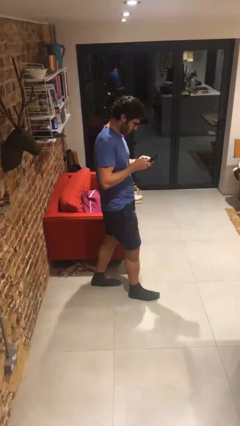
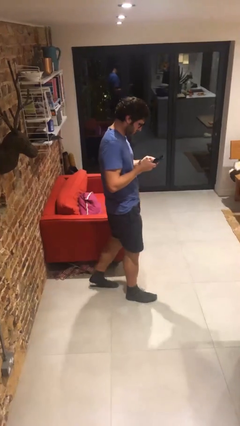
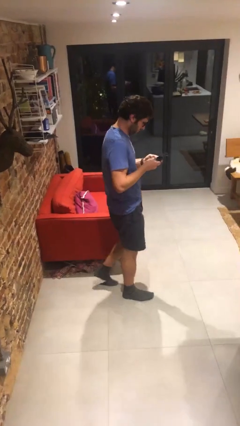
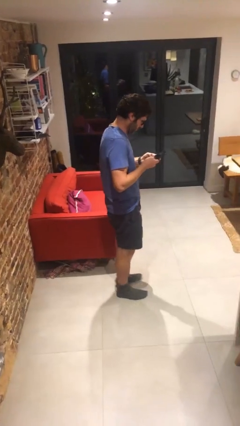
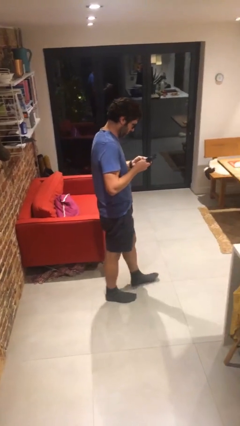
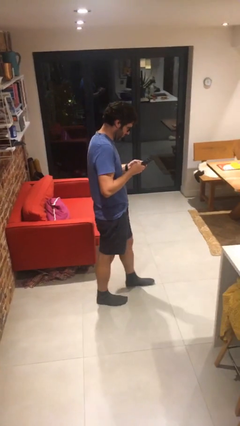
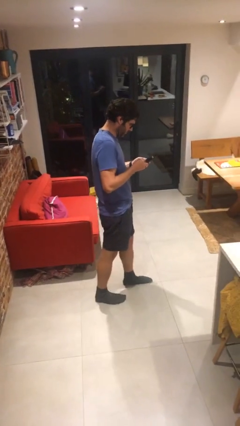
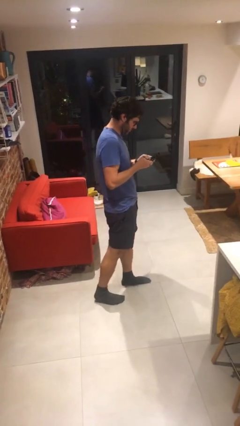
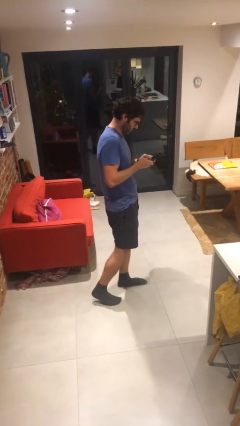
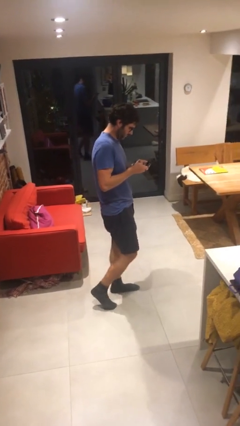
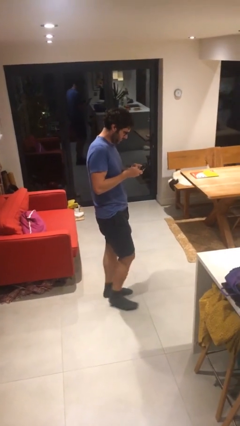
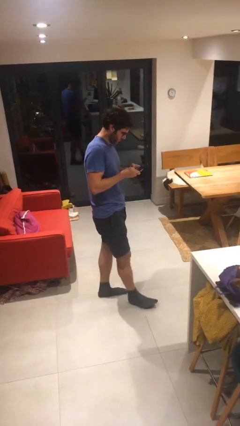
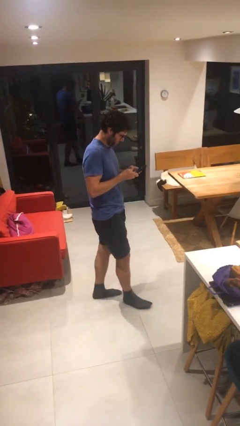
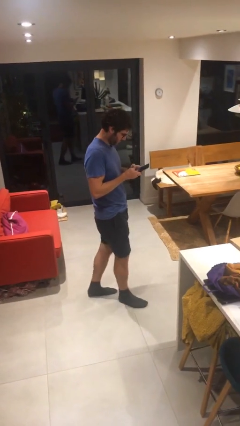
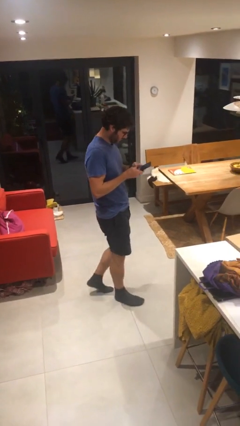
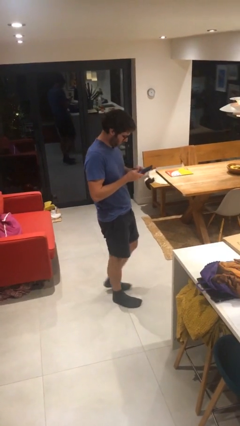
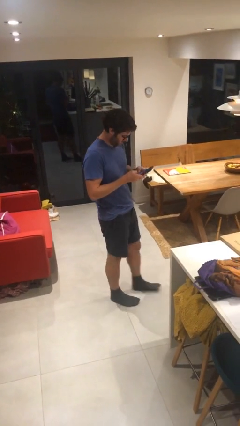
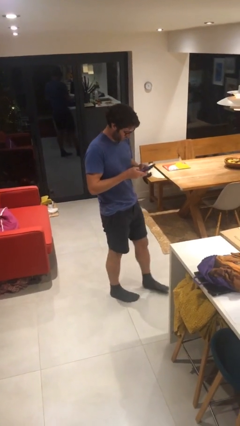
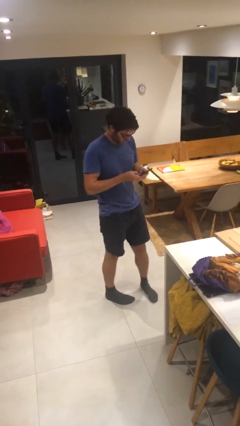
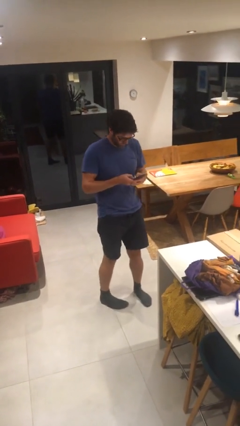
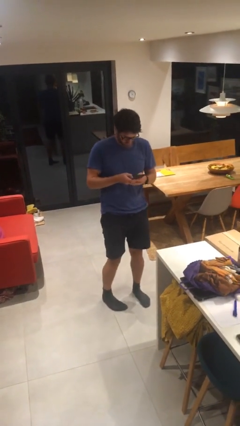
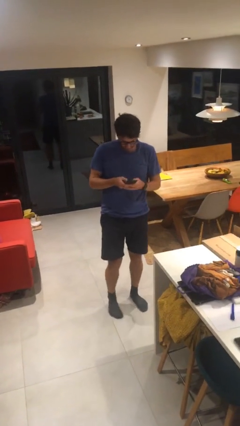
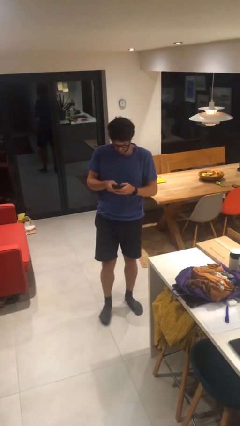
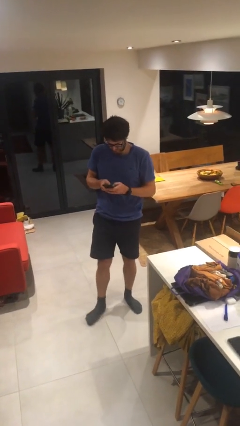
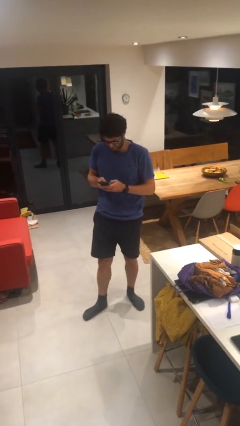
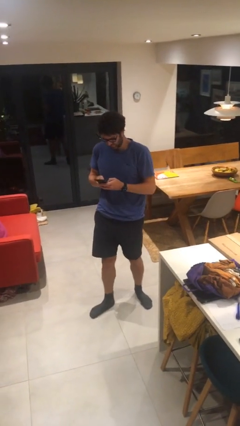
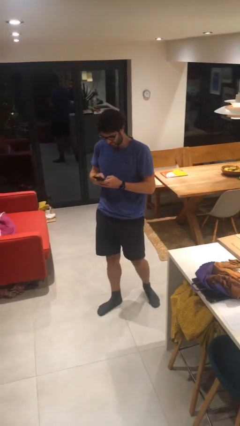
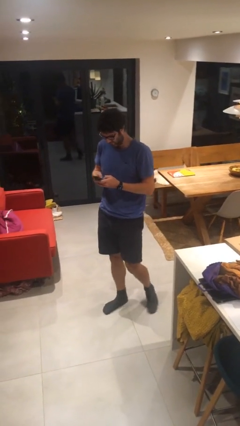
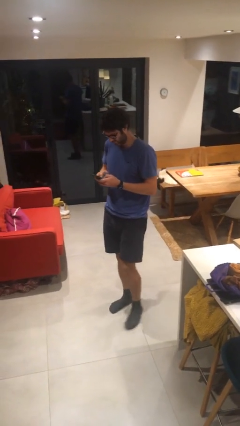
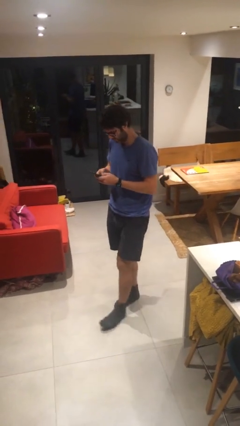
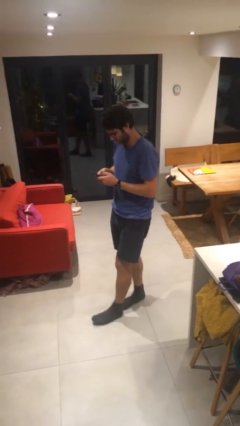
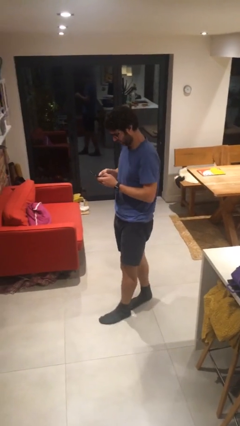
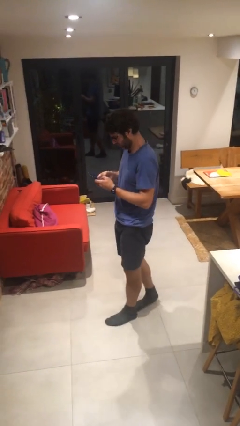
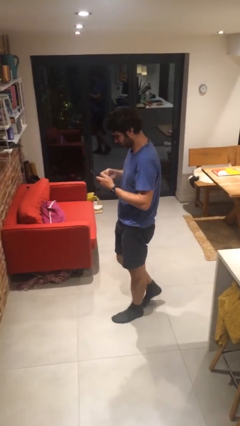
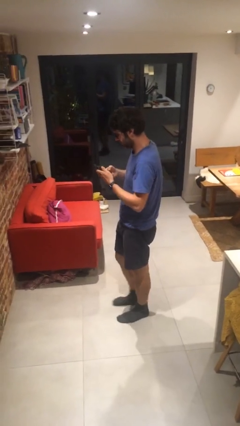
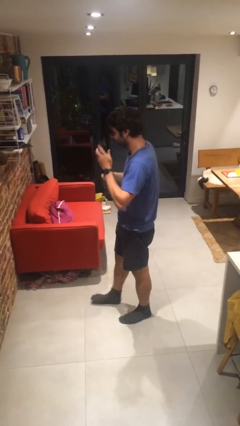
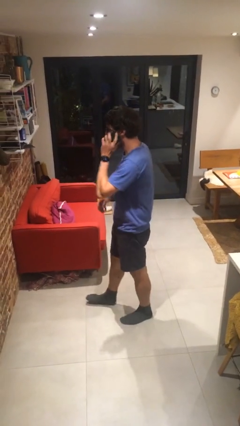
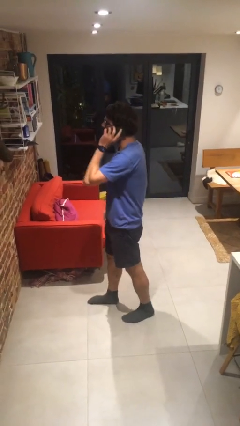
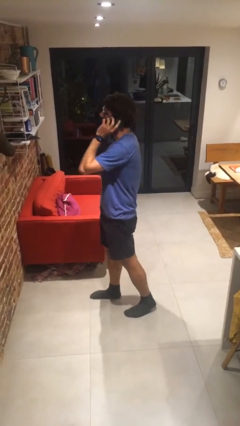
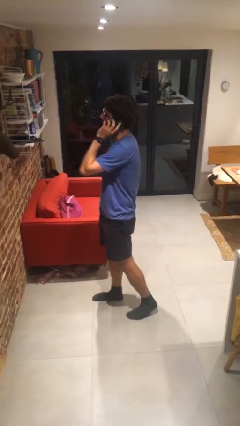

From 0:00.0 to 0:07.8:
person texts on phone

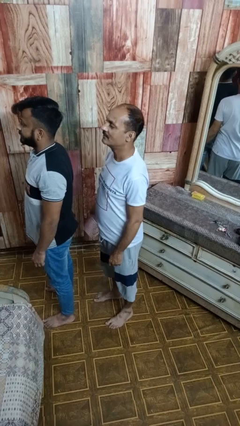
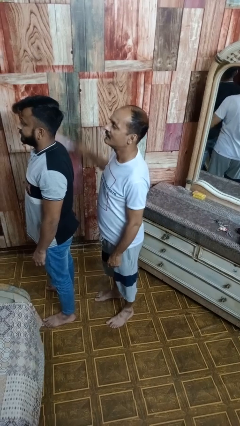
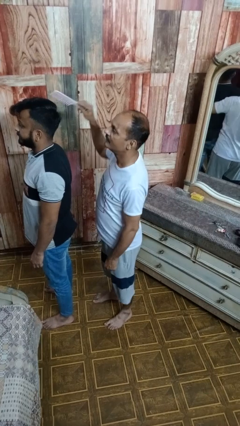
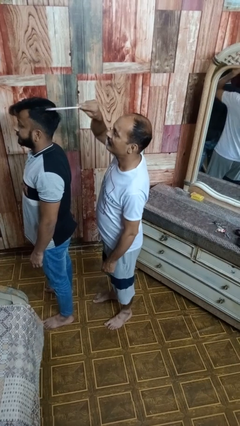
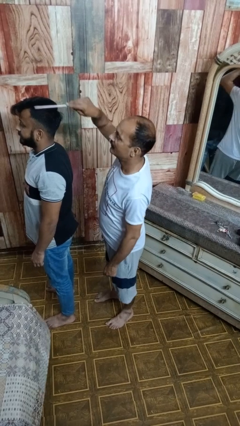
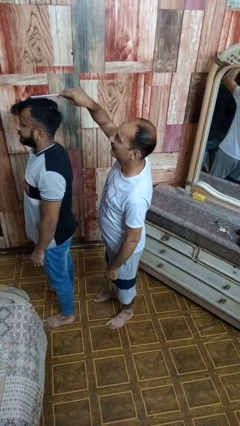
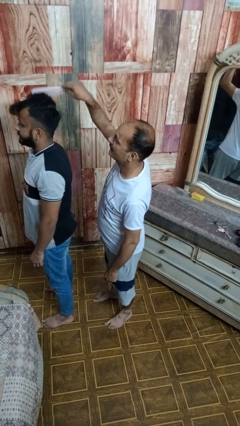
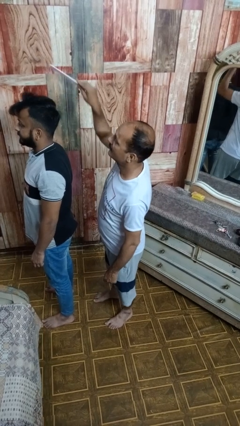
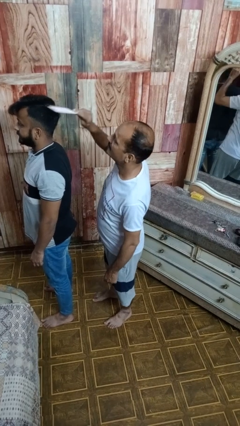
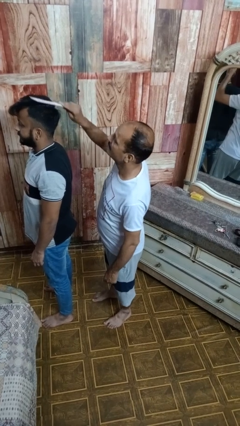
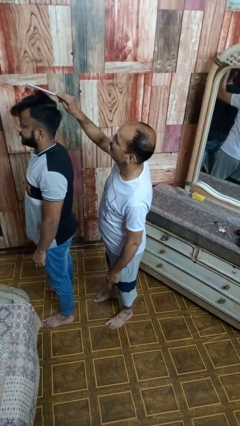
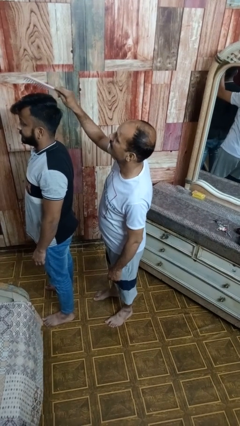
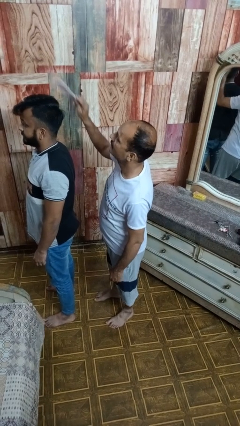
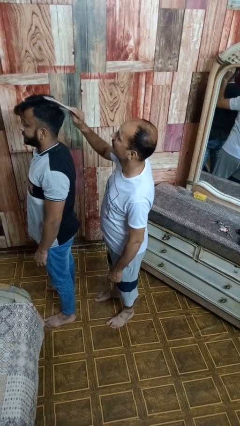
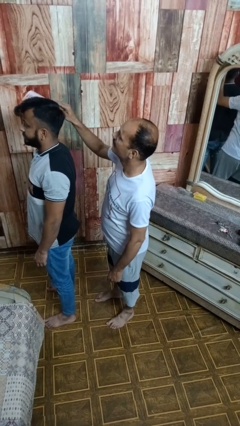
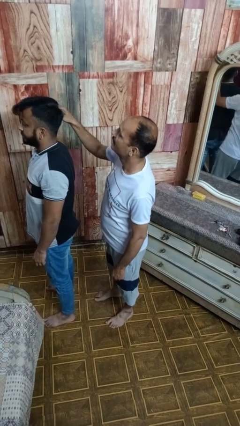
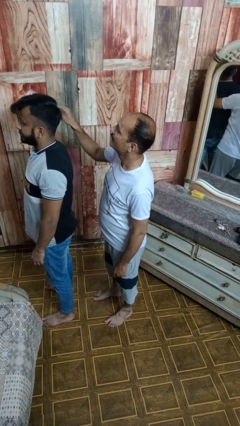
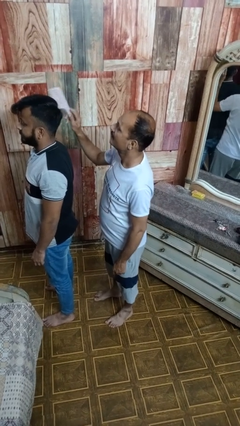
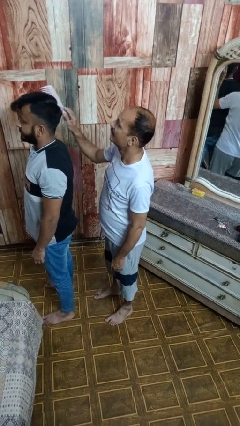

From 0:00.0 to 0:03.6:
person brushes hair of person

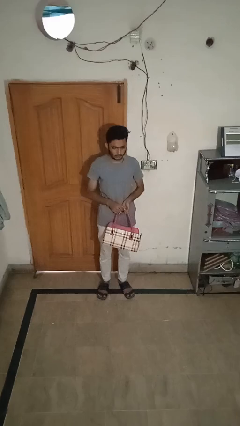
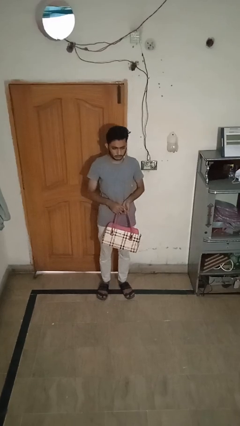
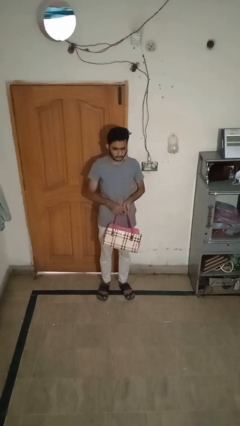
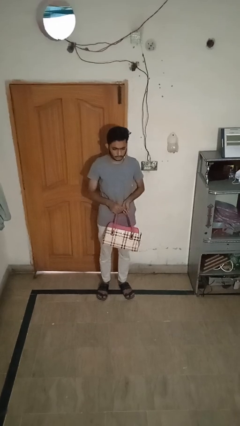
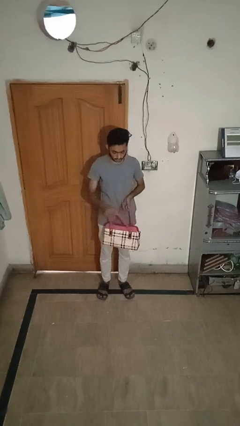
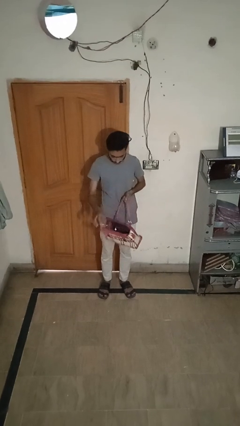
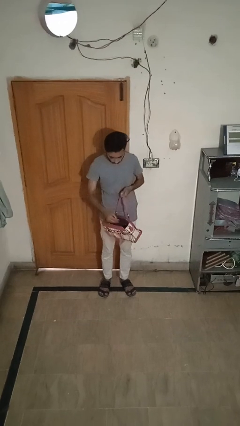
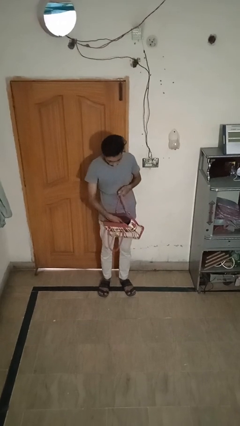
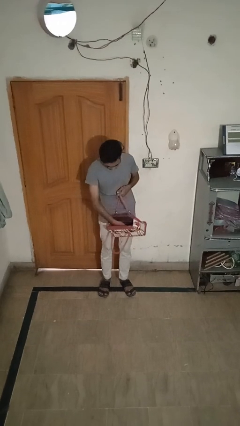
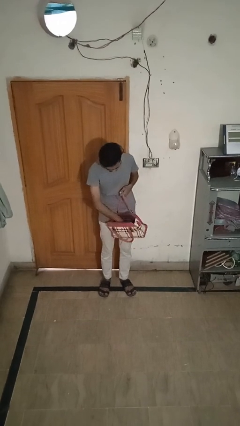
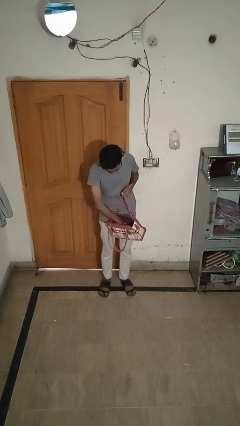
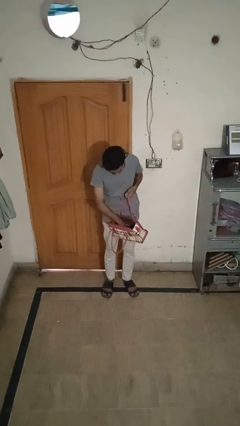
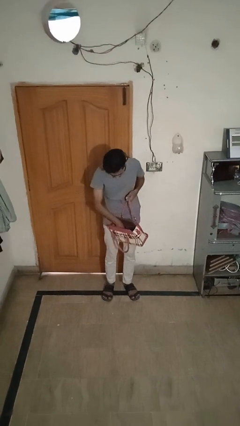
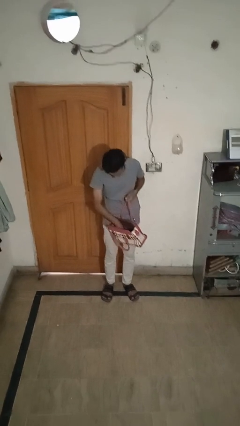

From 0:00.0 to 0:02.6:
person searches in purse

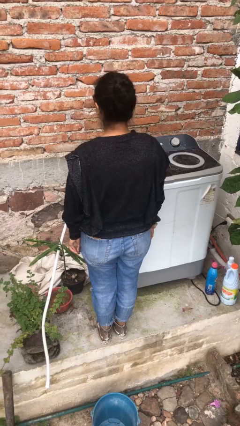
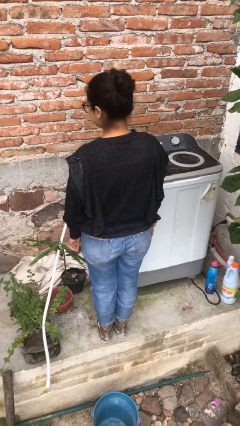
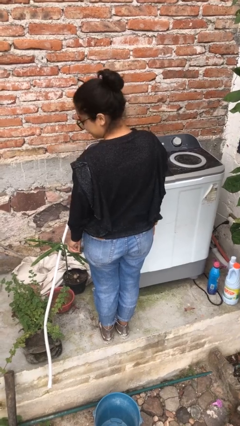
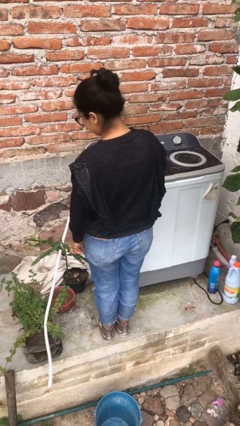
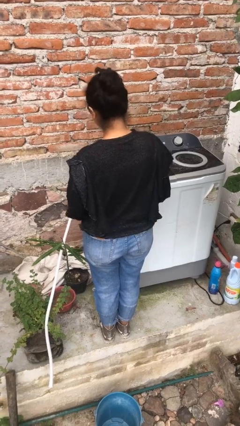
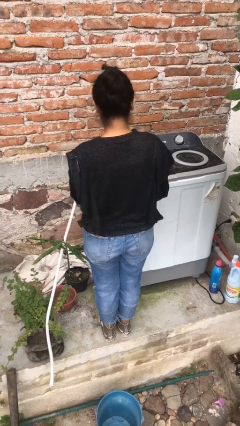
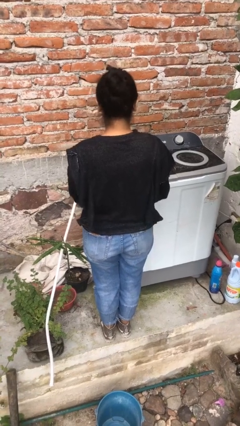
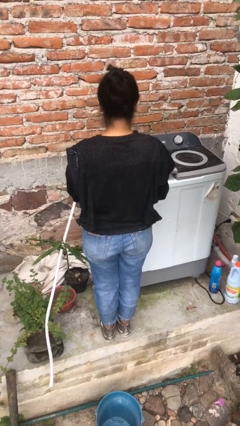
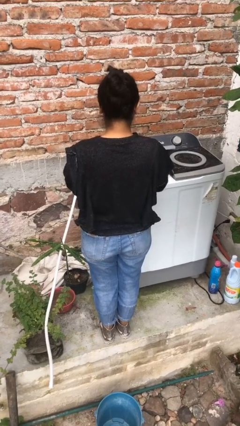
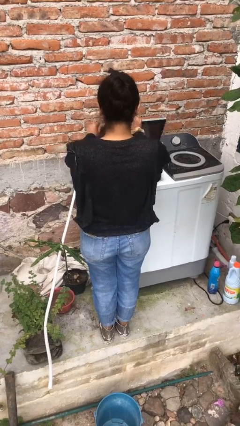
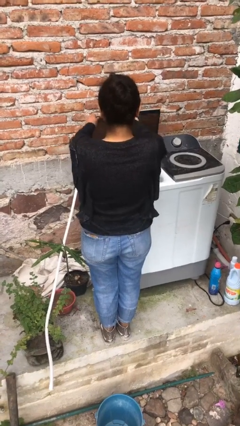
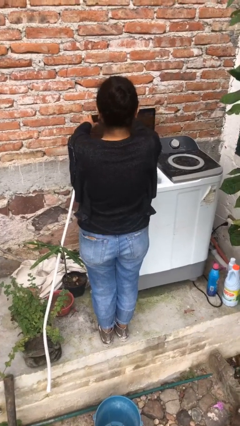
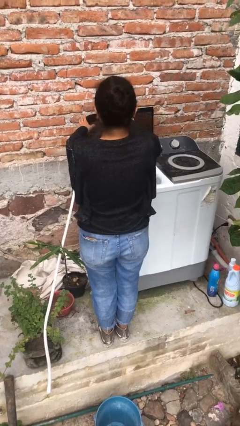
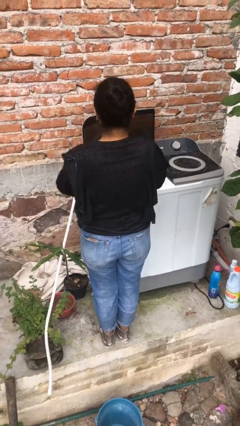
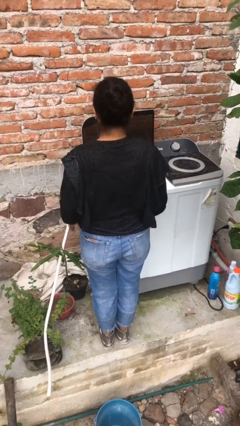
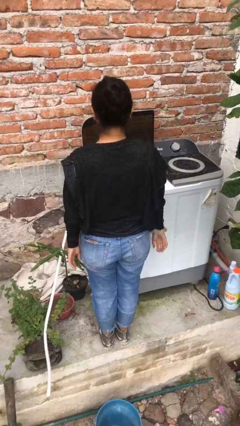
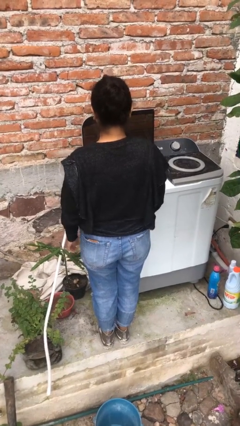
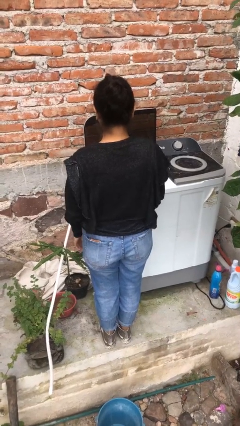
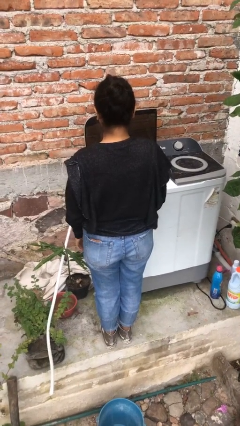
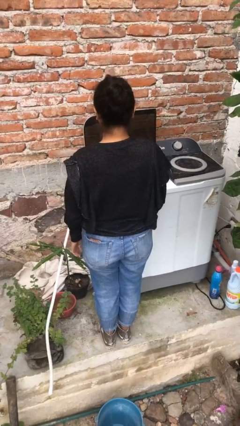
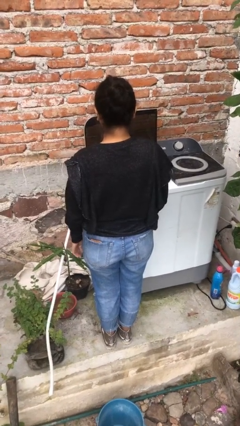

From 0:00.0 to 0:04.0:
person opens clothes washer
